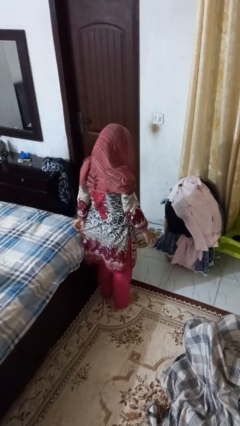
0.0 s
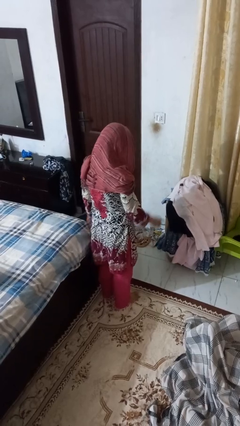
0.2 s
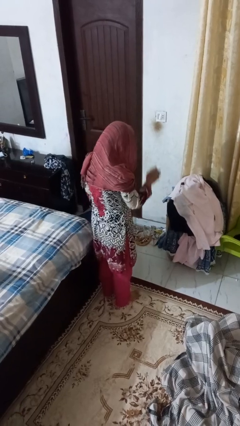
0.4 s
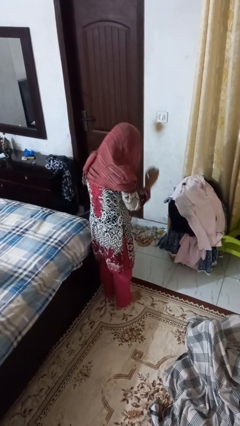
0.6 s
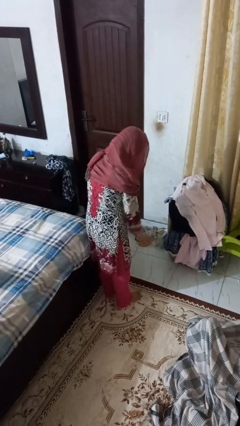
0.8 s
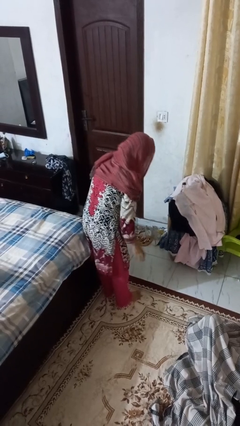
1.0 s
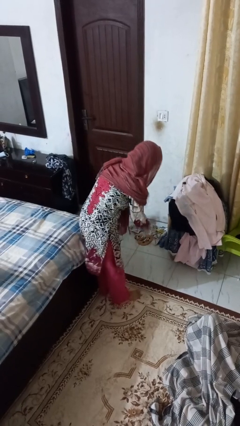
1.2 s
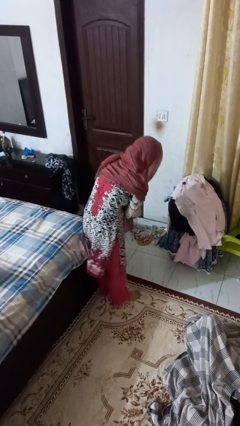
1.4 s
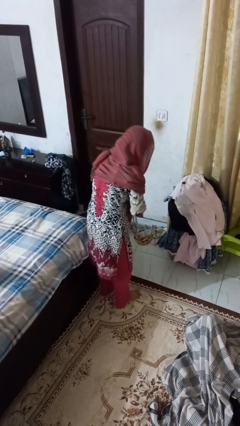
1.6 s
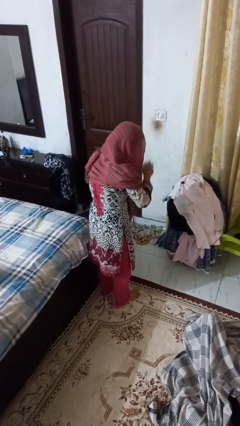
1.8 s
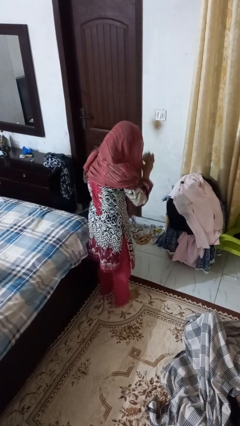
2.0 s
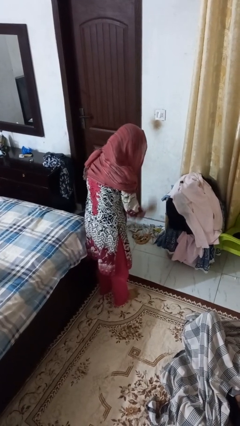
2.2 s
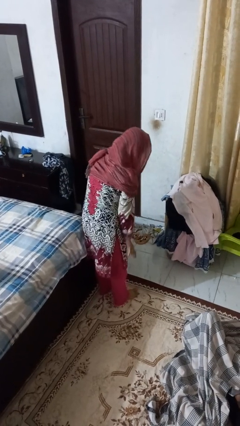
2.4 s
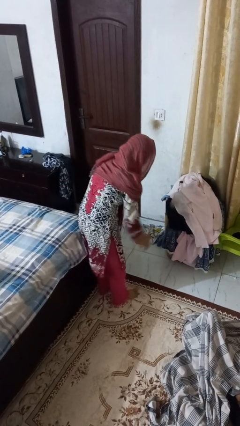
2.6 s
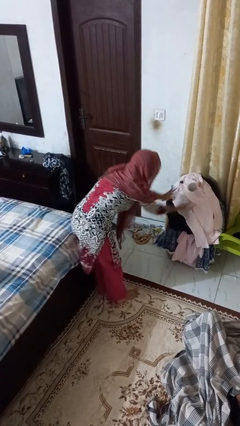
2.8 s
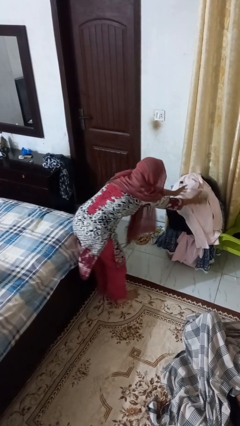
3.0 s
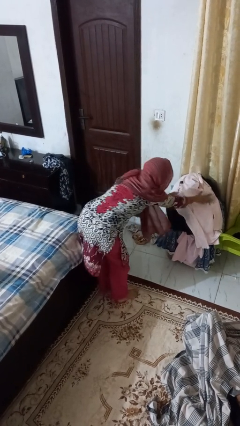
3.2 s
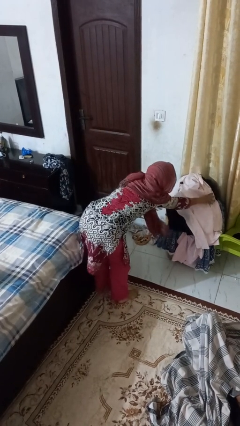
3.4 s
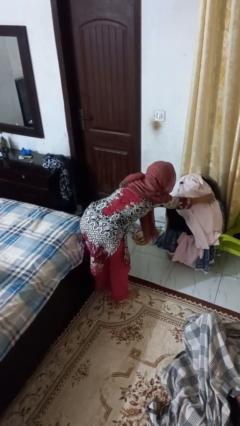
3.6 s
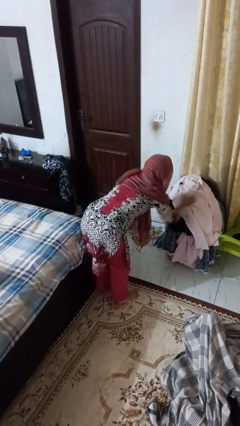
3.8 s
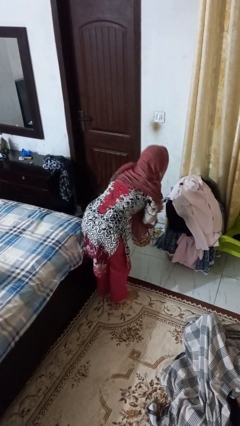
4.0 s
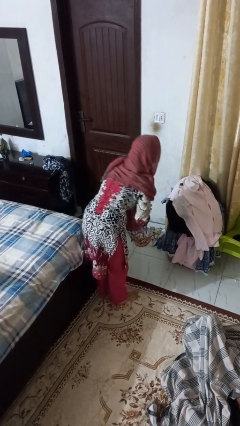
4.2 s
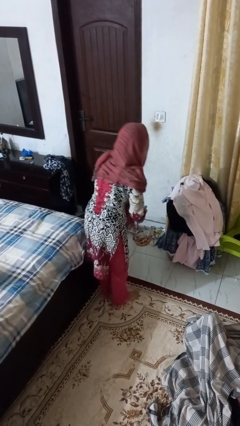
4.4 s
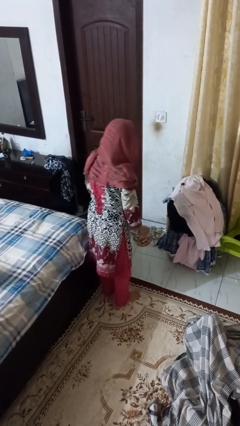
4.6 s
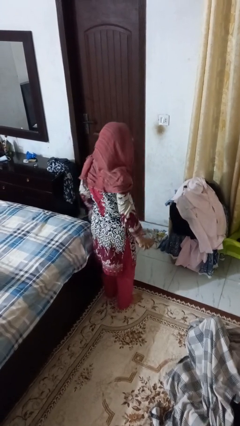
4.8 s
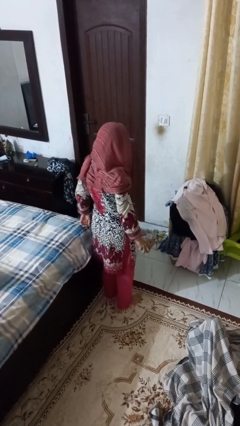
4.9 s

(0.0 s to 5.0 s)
person bounces ball on floor

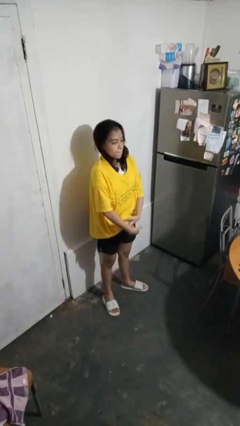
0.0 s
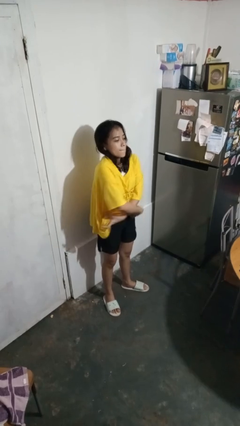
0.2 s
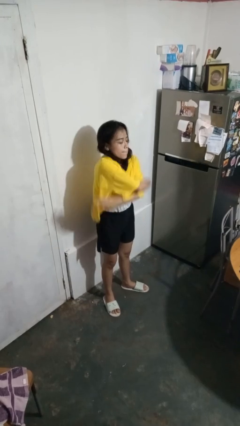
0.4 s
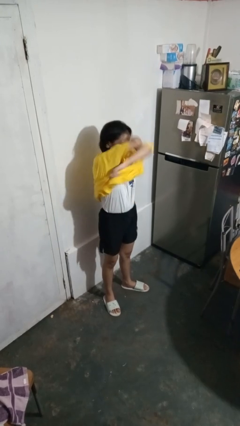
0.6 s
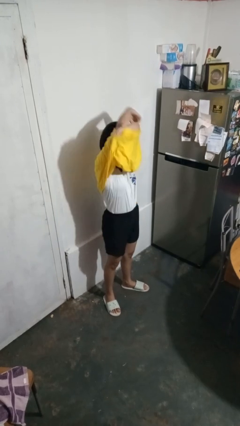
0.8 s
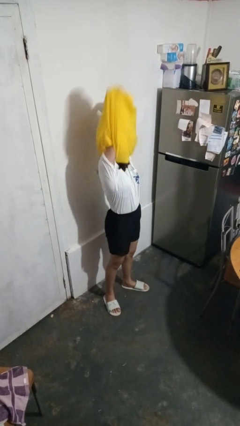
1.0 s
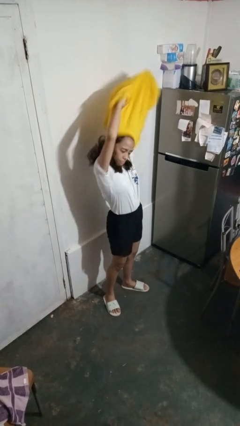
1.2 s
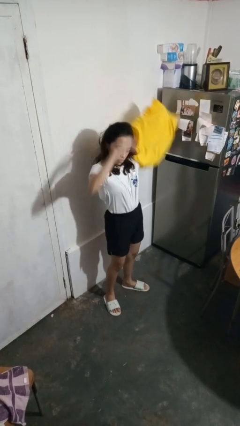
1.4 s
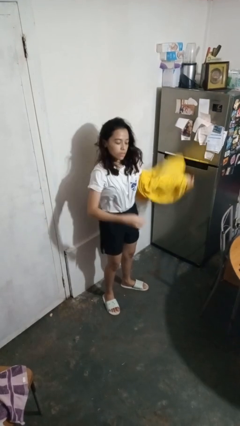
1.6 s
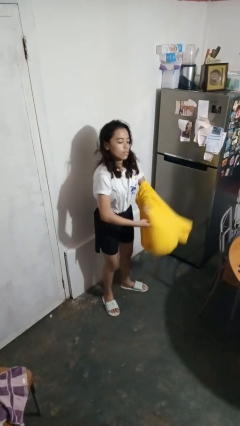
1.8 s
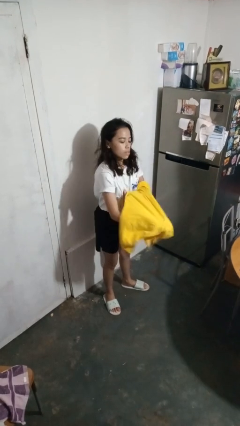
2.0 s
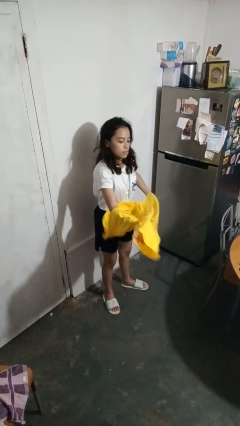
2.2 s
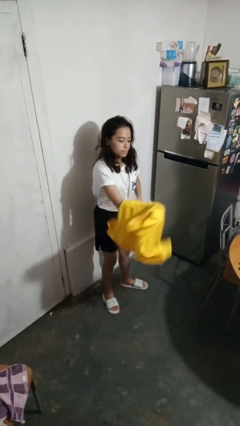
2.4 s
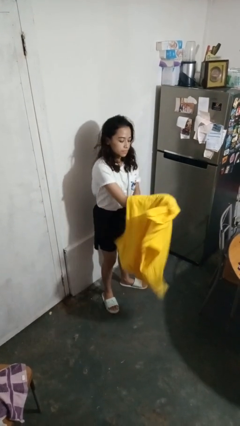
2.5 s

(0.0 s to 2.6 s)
person takes off shirt

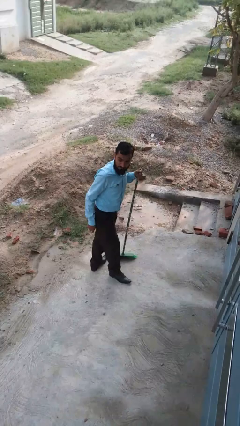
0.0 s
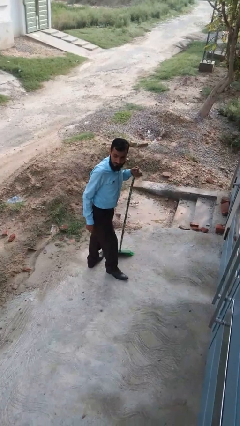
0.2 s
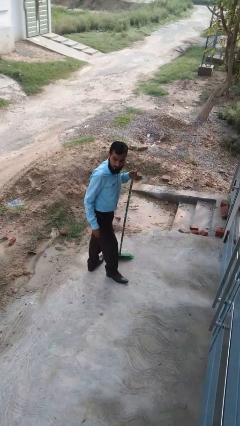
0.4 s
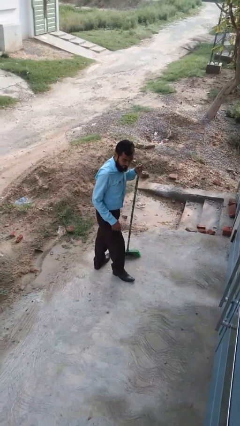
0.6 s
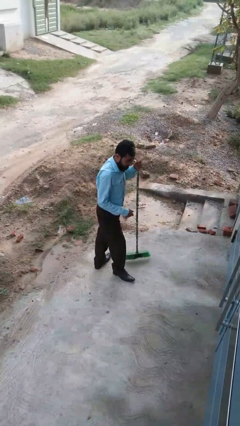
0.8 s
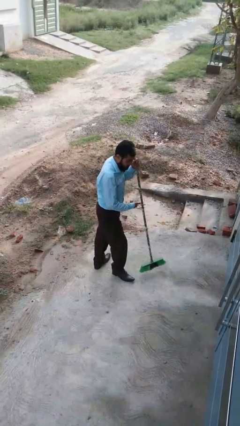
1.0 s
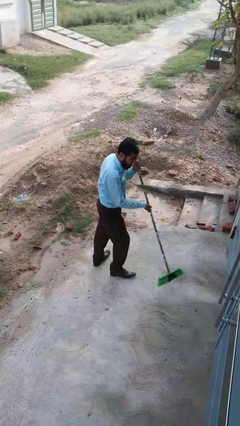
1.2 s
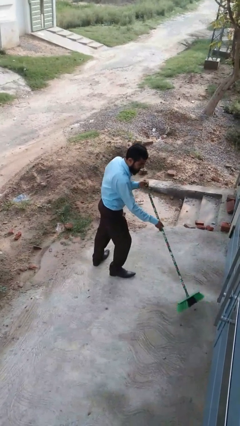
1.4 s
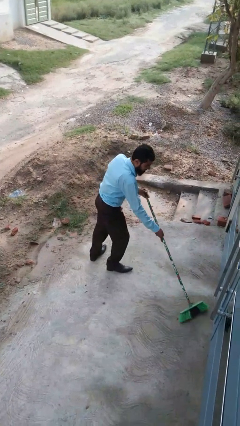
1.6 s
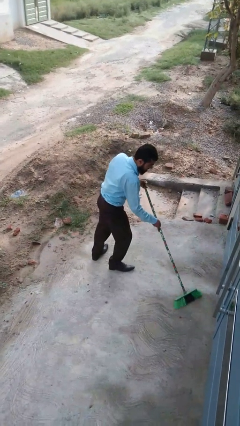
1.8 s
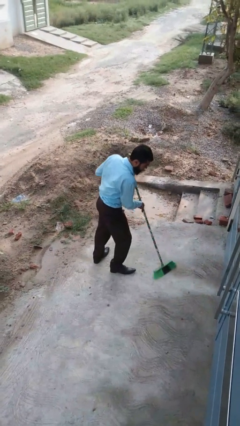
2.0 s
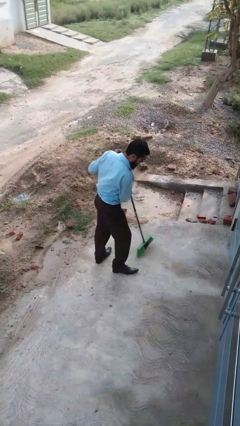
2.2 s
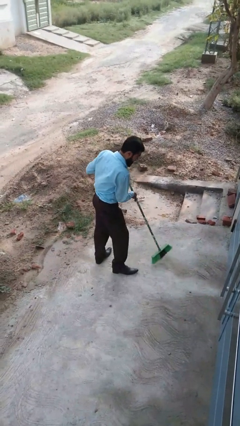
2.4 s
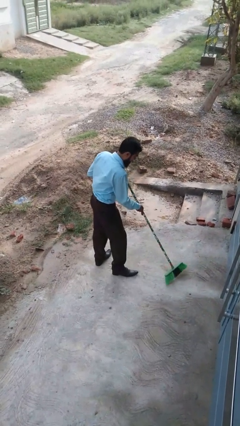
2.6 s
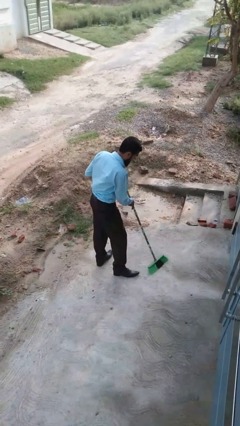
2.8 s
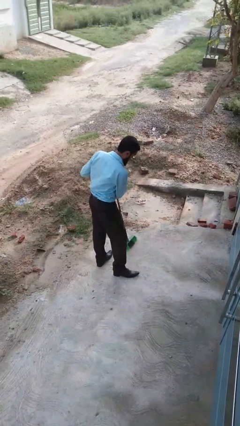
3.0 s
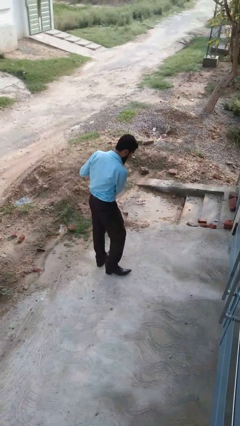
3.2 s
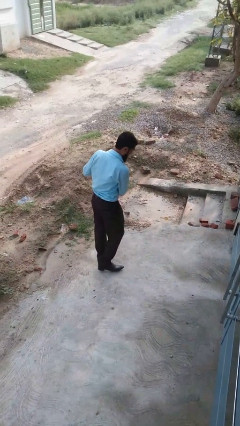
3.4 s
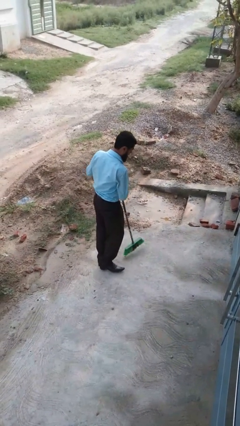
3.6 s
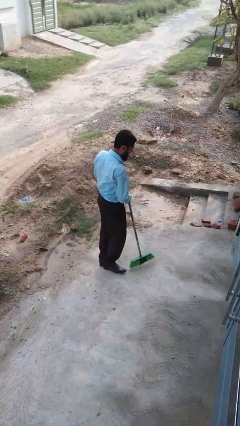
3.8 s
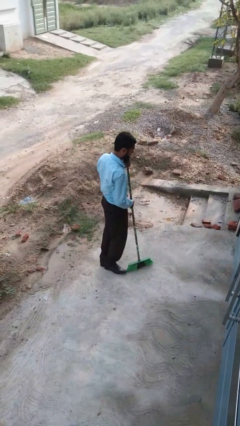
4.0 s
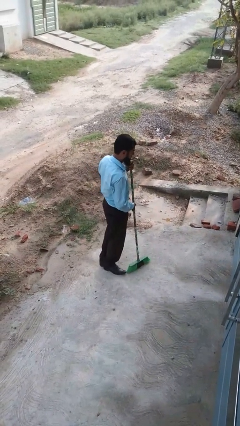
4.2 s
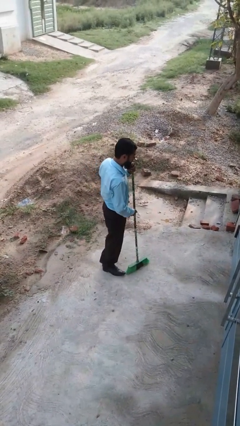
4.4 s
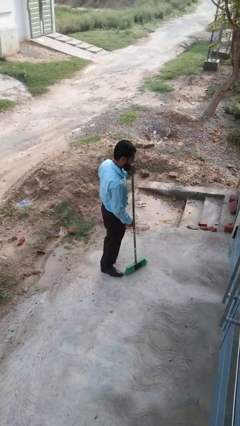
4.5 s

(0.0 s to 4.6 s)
person sweeps floor

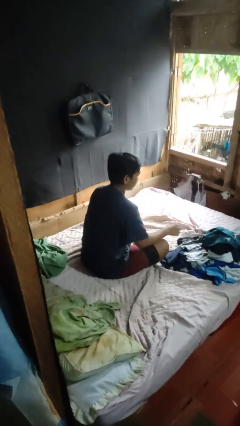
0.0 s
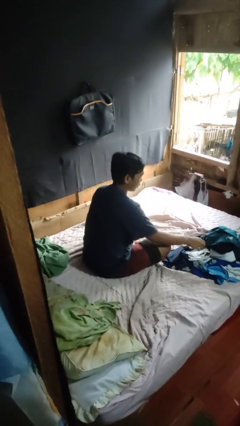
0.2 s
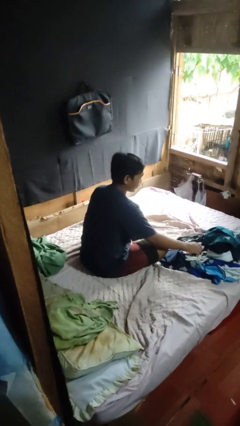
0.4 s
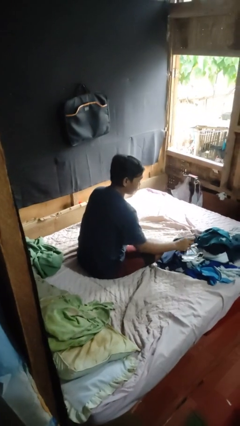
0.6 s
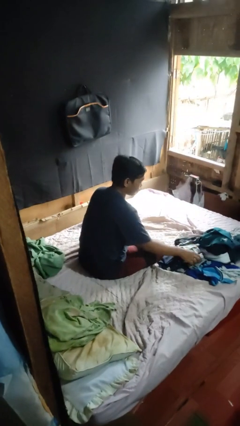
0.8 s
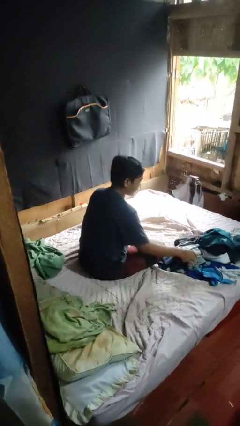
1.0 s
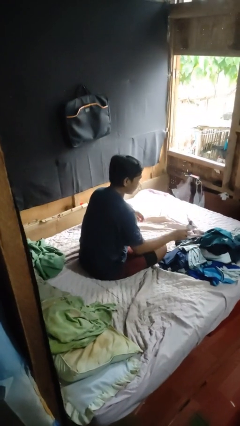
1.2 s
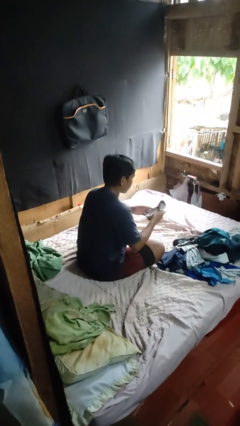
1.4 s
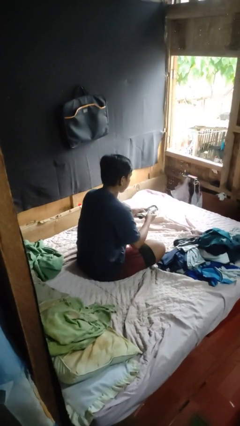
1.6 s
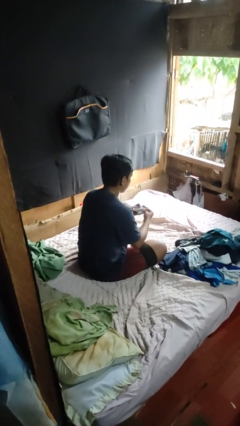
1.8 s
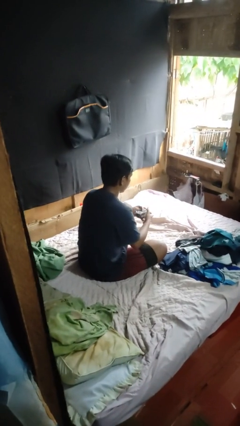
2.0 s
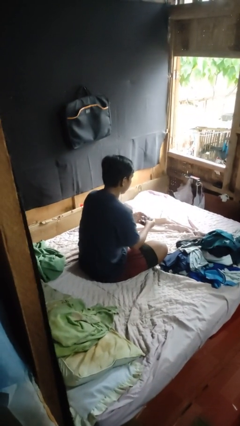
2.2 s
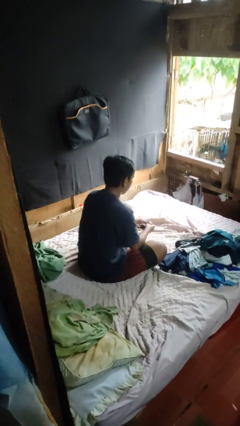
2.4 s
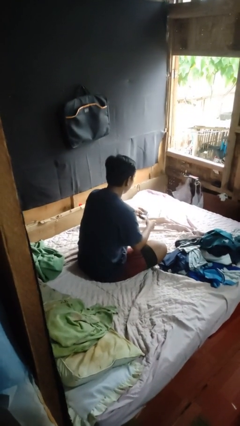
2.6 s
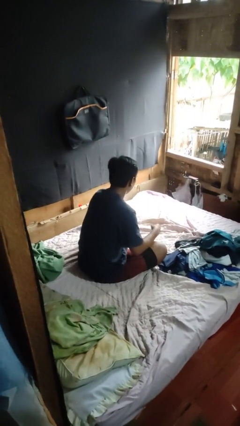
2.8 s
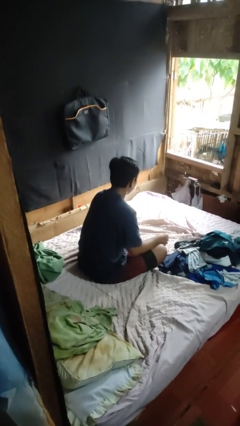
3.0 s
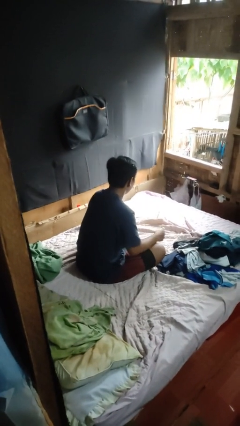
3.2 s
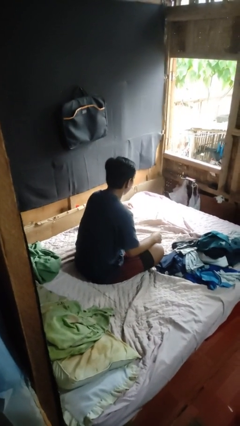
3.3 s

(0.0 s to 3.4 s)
person folds socks

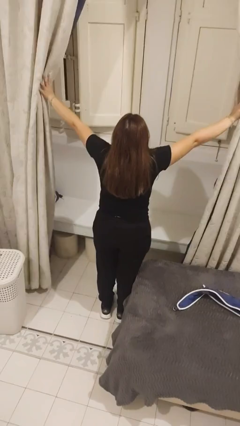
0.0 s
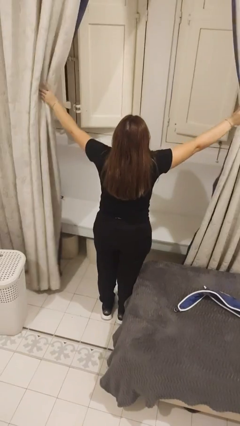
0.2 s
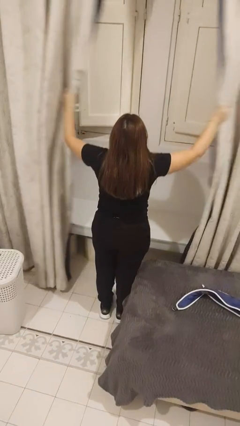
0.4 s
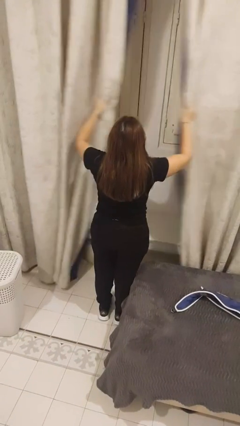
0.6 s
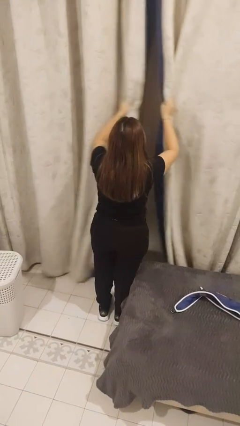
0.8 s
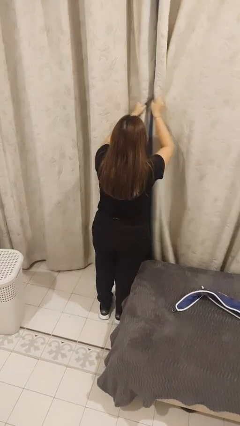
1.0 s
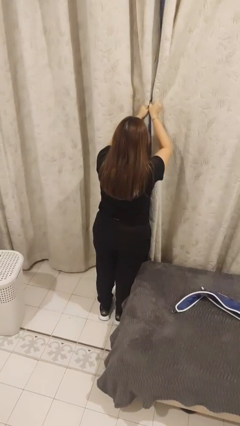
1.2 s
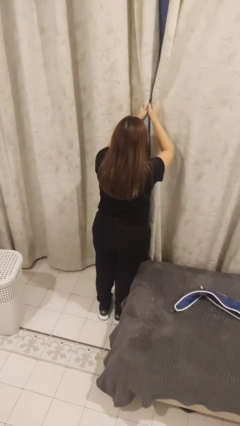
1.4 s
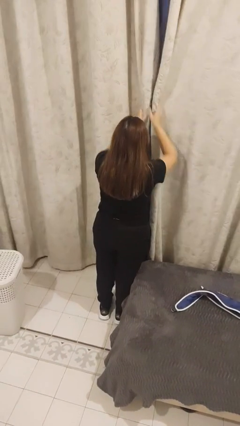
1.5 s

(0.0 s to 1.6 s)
person closes curtains

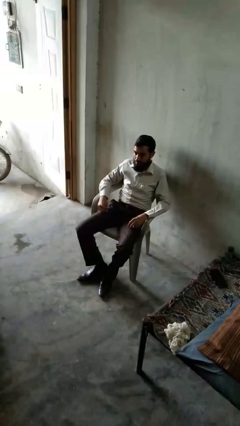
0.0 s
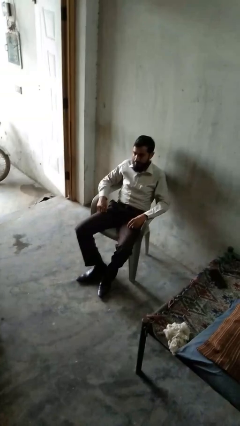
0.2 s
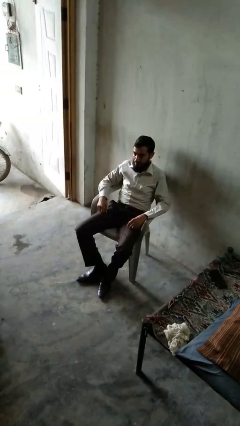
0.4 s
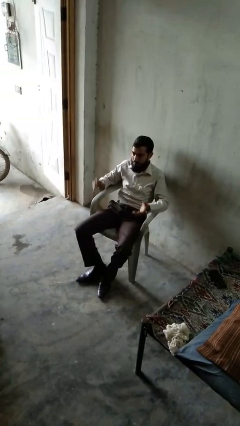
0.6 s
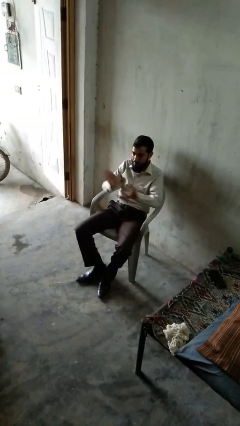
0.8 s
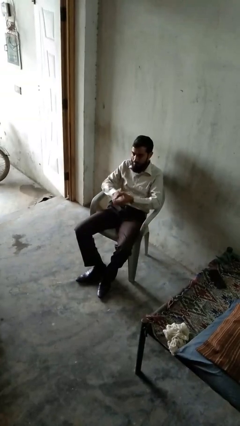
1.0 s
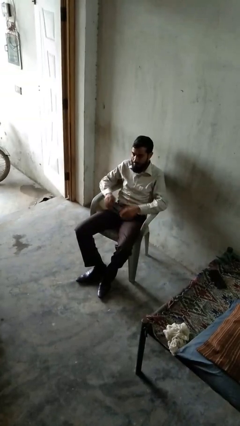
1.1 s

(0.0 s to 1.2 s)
person claps hands
